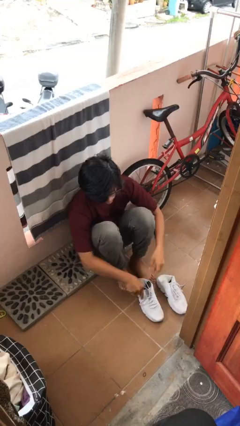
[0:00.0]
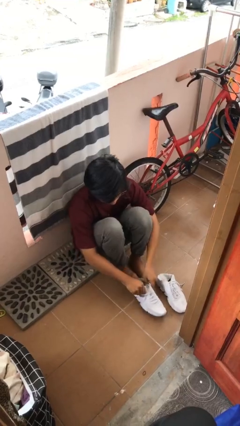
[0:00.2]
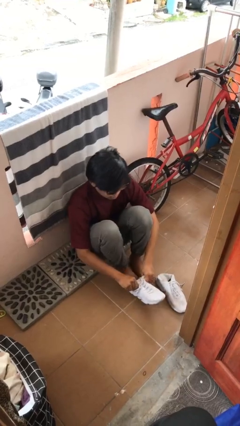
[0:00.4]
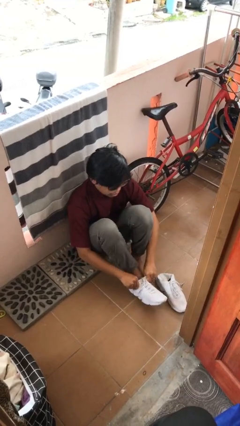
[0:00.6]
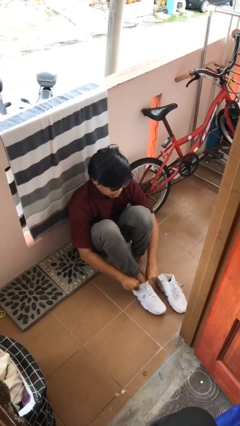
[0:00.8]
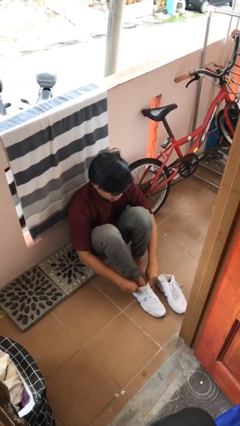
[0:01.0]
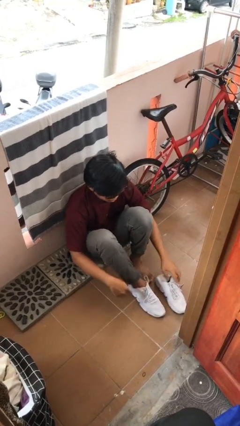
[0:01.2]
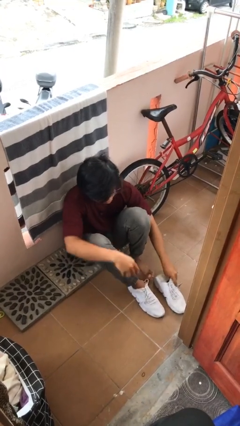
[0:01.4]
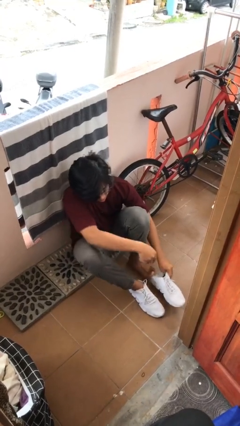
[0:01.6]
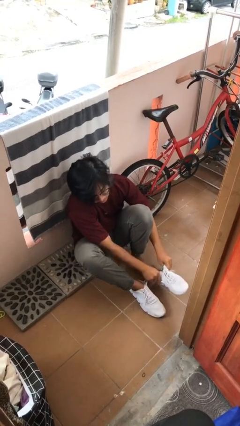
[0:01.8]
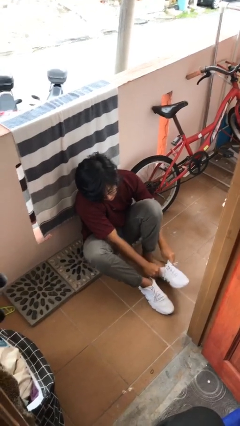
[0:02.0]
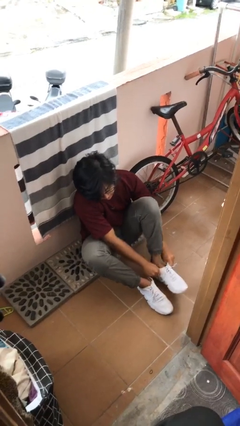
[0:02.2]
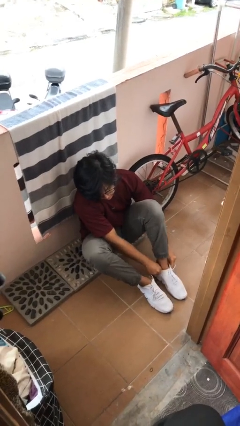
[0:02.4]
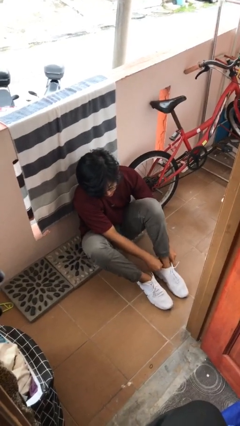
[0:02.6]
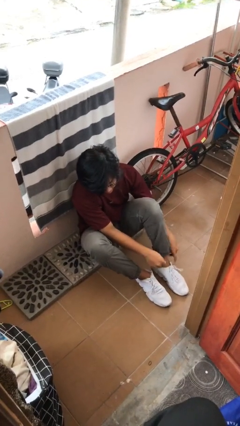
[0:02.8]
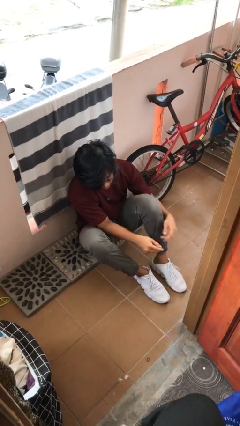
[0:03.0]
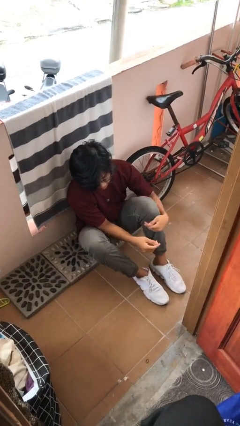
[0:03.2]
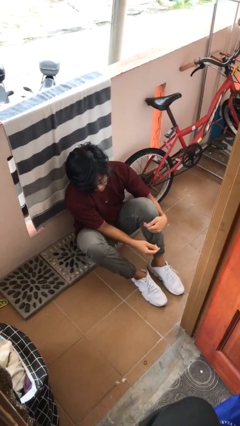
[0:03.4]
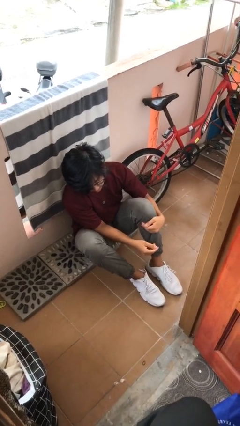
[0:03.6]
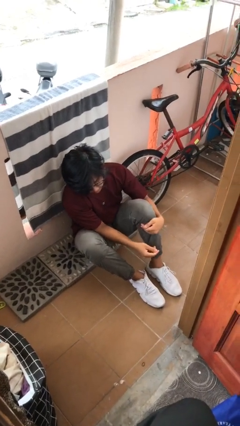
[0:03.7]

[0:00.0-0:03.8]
person puts on shoes

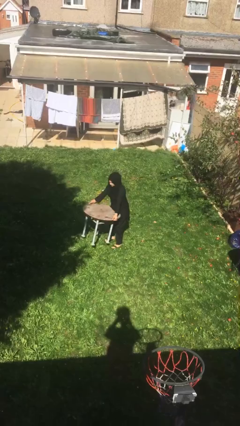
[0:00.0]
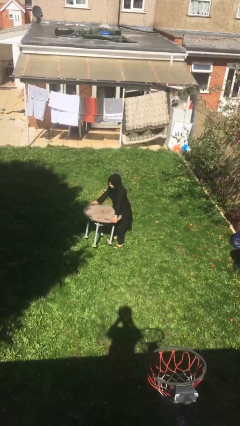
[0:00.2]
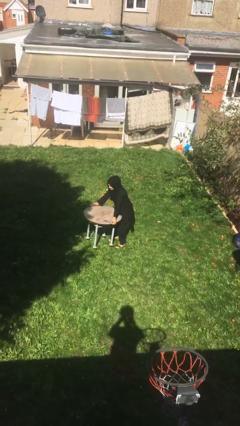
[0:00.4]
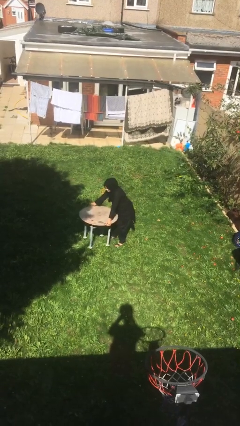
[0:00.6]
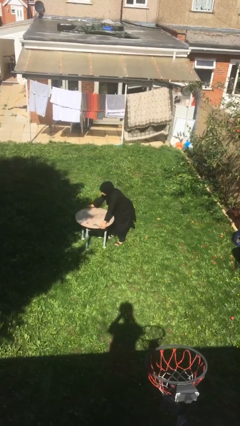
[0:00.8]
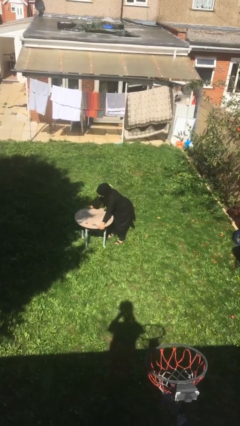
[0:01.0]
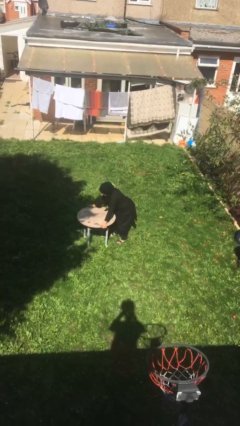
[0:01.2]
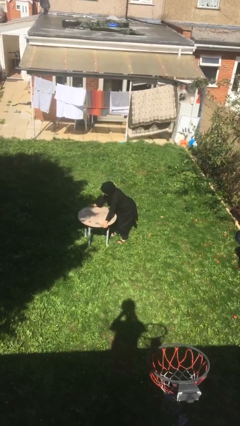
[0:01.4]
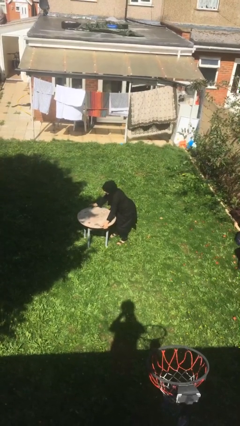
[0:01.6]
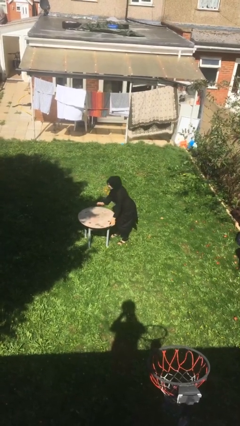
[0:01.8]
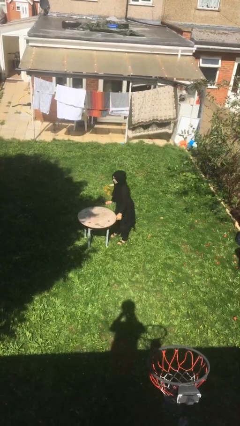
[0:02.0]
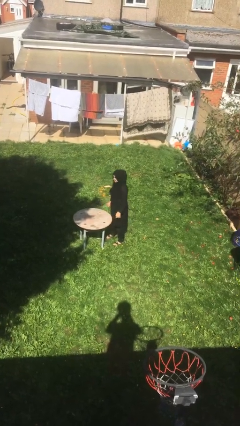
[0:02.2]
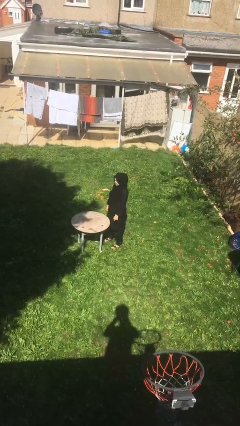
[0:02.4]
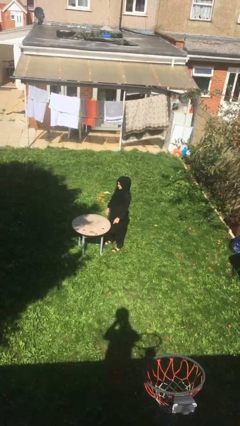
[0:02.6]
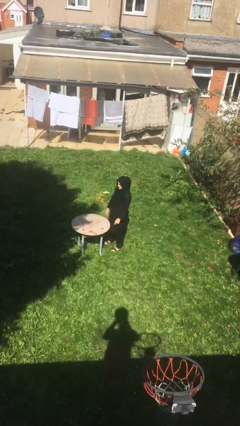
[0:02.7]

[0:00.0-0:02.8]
person puts down object on floor

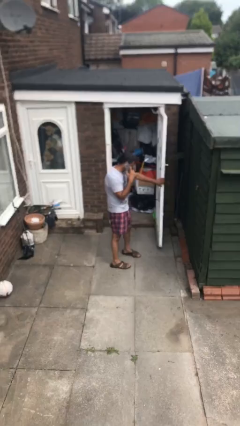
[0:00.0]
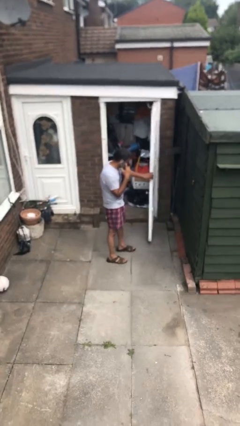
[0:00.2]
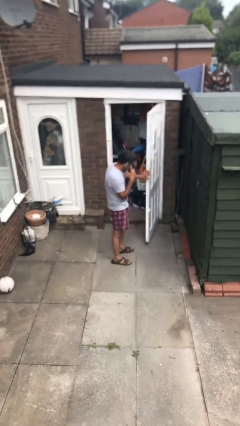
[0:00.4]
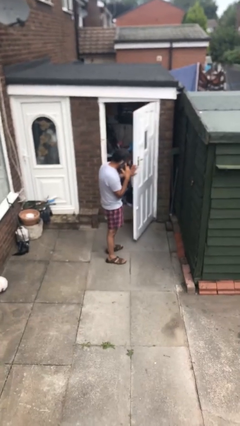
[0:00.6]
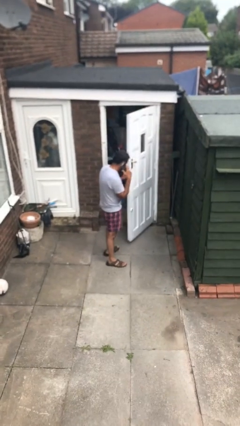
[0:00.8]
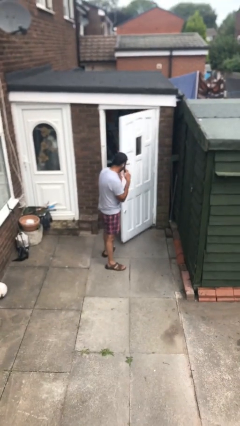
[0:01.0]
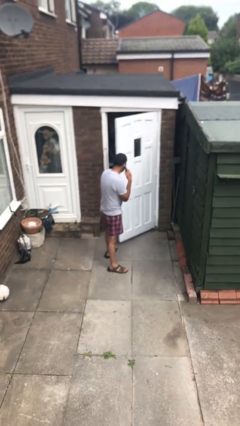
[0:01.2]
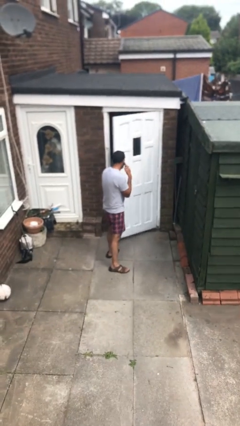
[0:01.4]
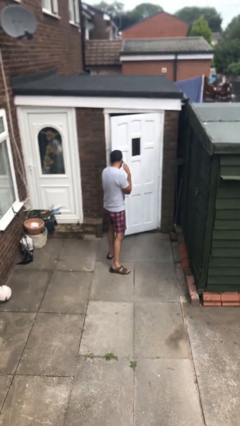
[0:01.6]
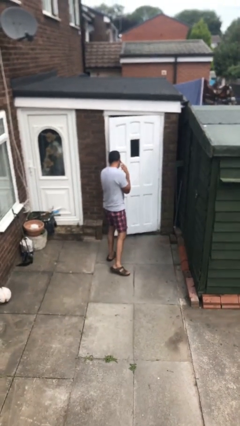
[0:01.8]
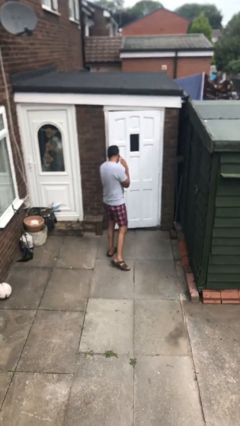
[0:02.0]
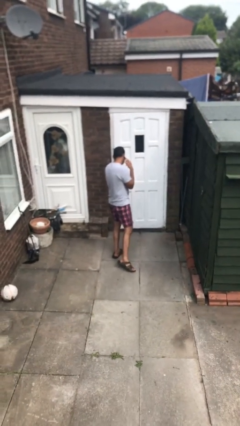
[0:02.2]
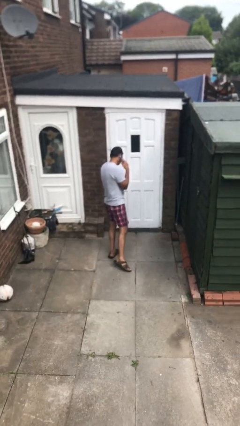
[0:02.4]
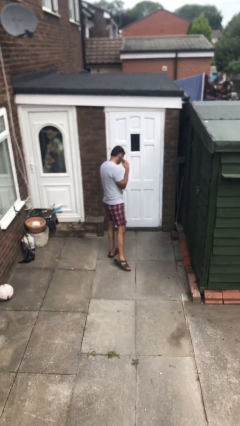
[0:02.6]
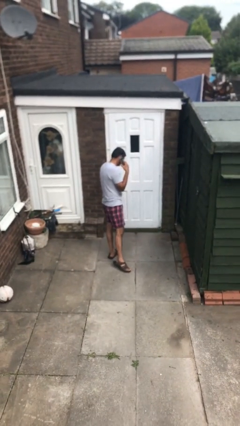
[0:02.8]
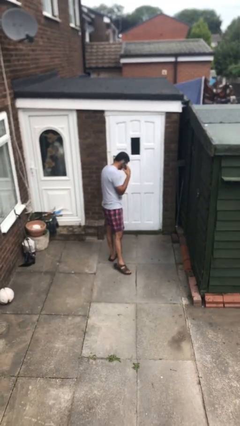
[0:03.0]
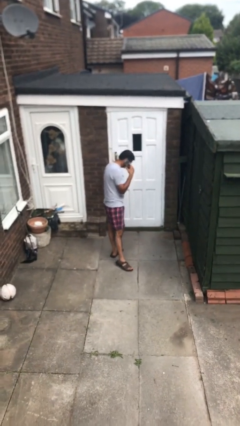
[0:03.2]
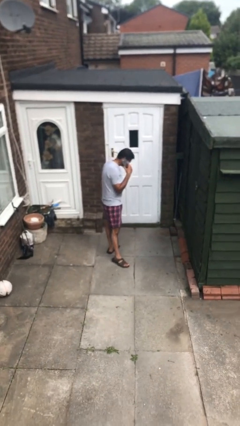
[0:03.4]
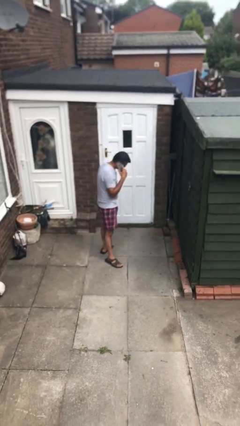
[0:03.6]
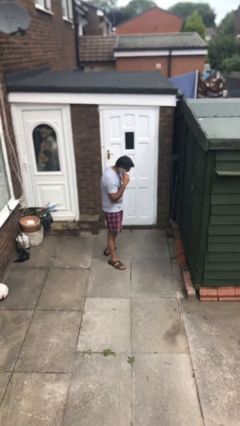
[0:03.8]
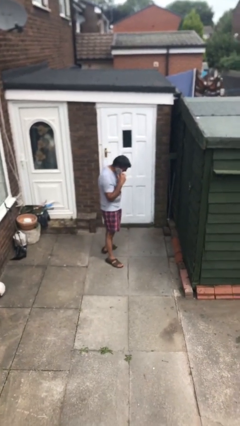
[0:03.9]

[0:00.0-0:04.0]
person closes facility door

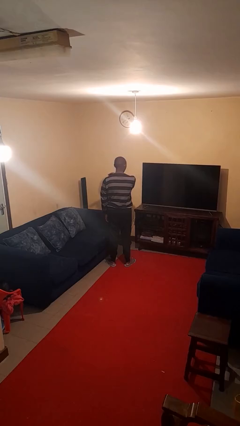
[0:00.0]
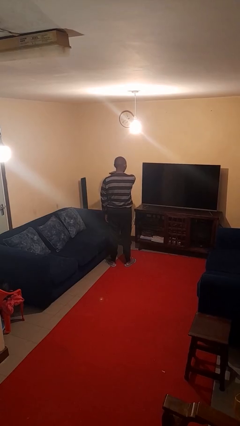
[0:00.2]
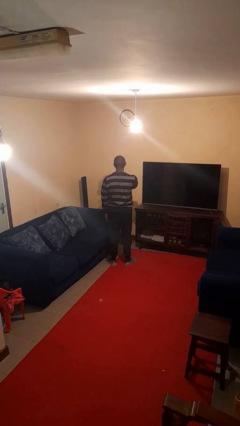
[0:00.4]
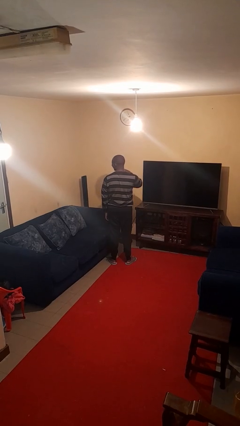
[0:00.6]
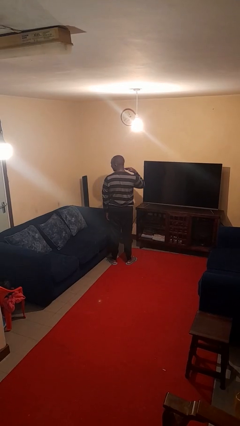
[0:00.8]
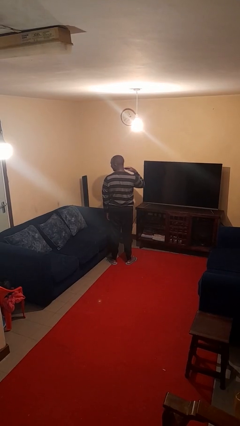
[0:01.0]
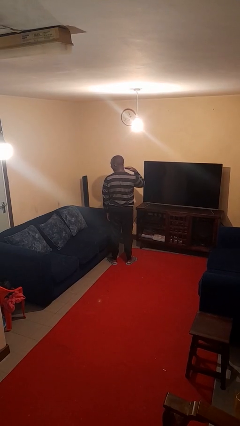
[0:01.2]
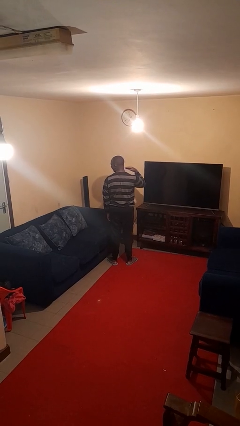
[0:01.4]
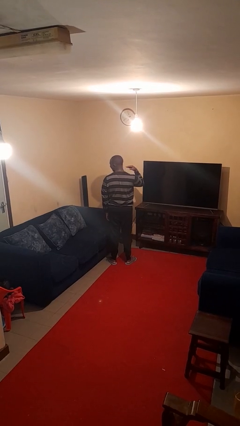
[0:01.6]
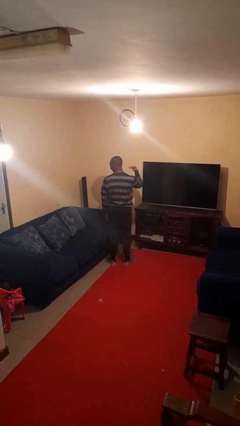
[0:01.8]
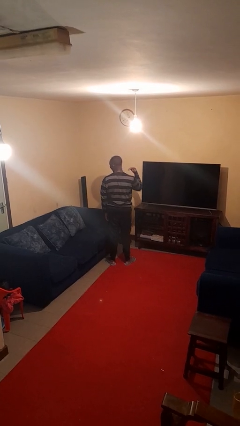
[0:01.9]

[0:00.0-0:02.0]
person gestures cut

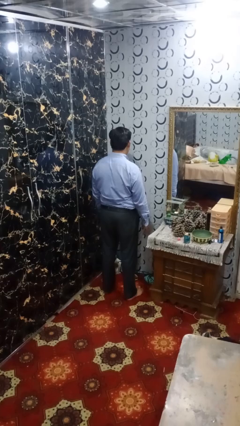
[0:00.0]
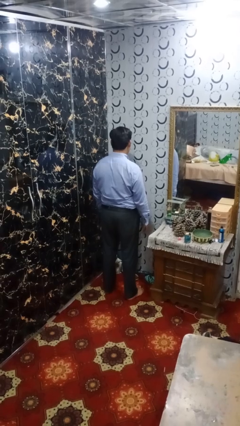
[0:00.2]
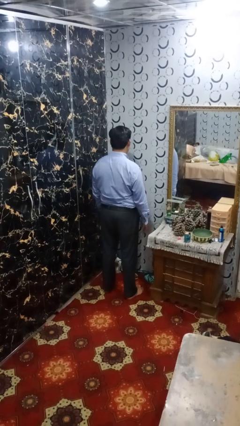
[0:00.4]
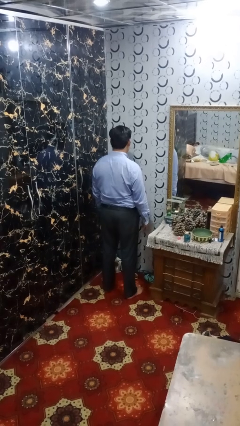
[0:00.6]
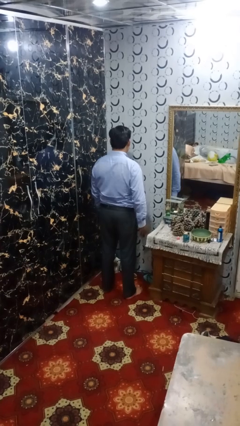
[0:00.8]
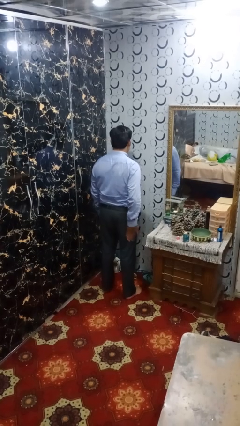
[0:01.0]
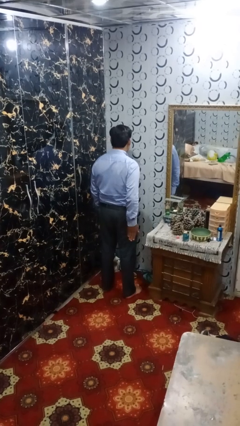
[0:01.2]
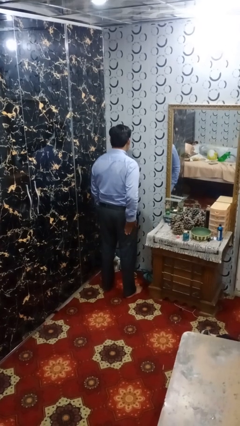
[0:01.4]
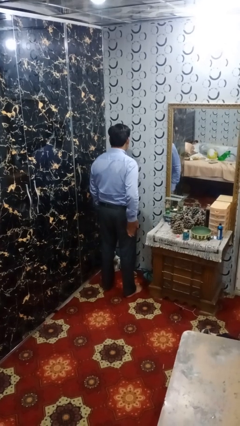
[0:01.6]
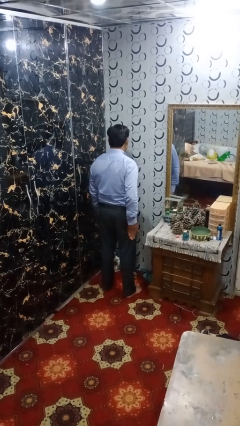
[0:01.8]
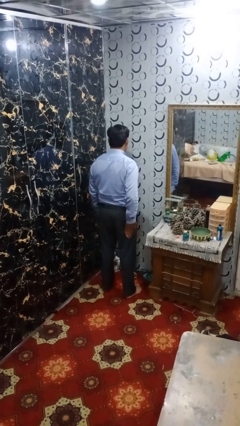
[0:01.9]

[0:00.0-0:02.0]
person slaps hands on thighs

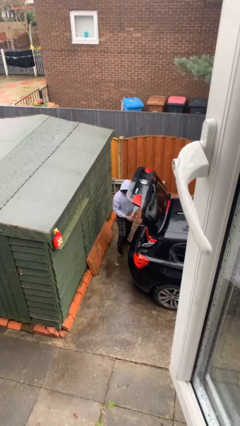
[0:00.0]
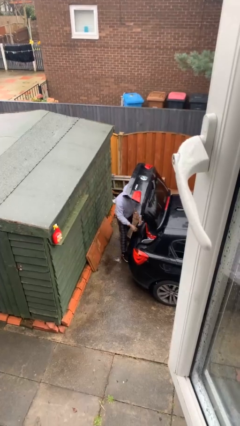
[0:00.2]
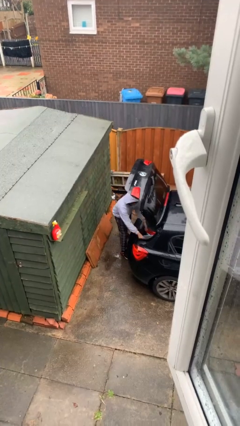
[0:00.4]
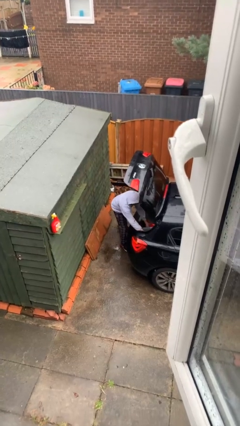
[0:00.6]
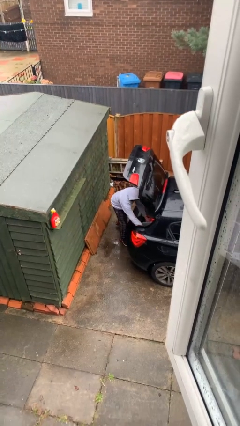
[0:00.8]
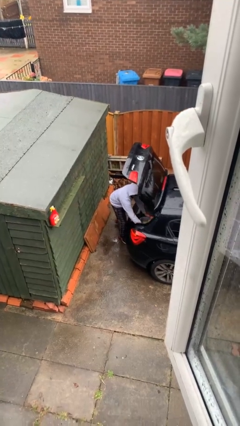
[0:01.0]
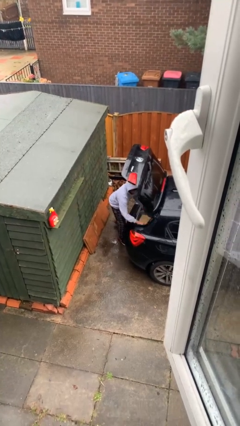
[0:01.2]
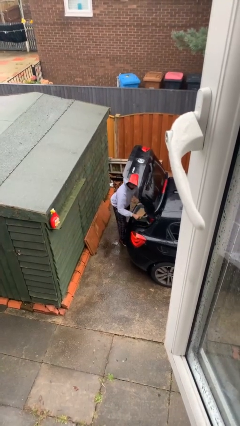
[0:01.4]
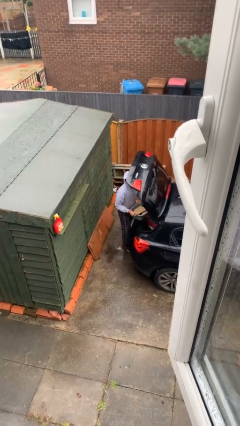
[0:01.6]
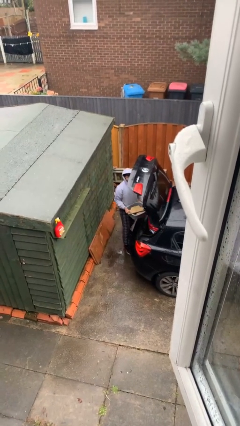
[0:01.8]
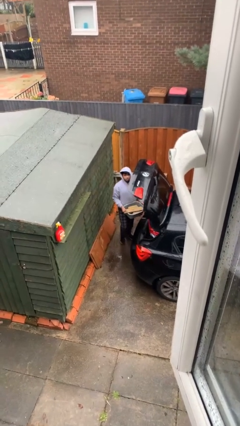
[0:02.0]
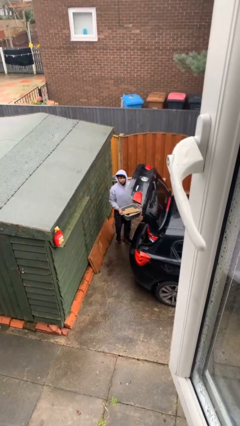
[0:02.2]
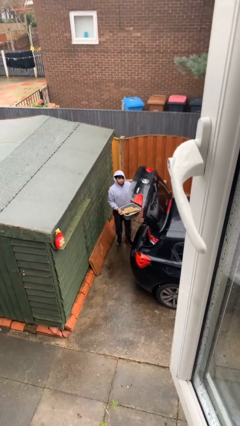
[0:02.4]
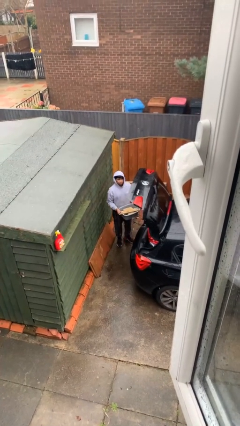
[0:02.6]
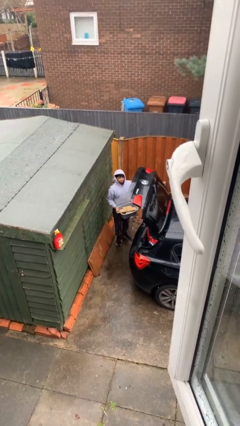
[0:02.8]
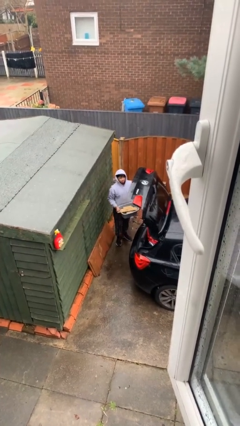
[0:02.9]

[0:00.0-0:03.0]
person unloads car
